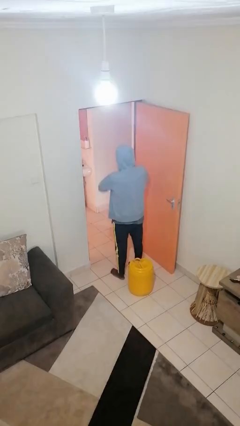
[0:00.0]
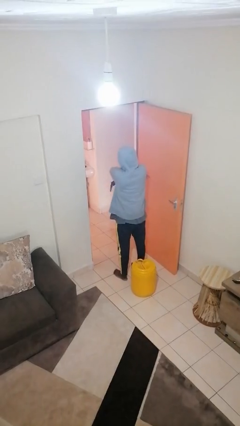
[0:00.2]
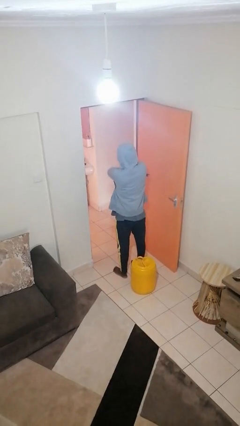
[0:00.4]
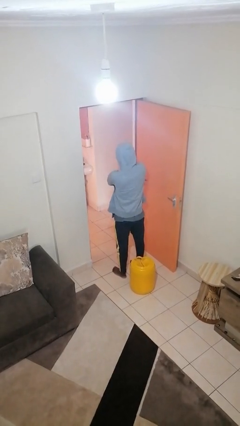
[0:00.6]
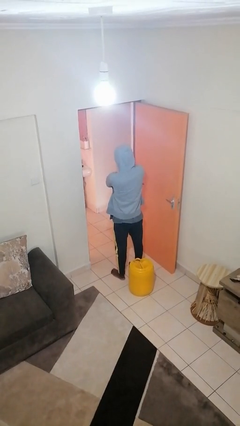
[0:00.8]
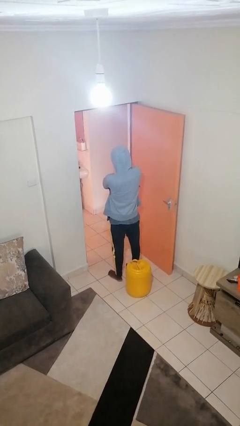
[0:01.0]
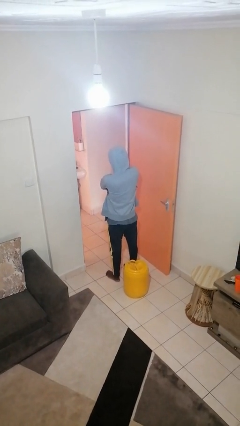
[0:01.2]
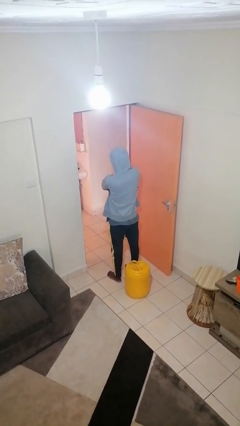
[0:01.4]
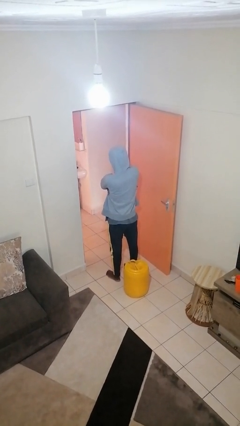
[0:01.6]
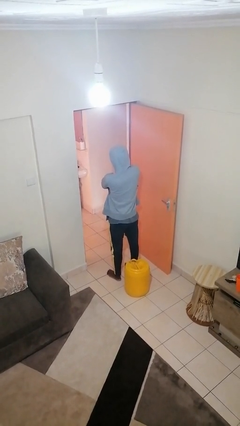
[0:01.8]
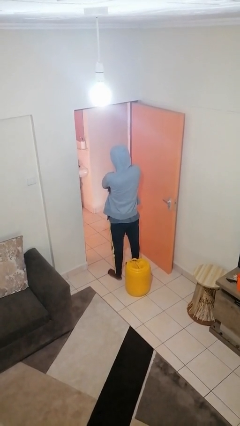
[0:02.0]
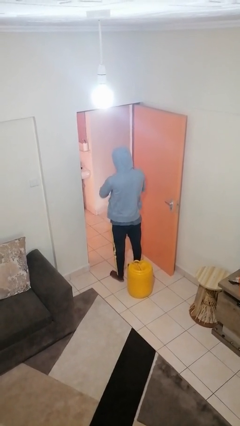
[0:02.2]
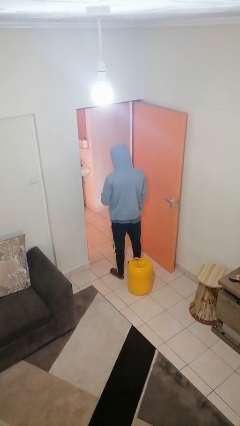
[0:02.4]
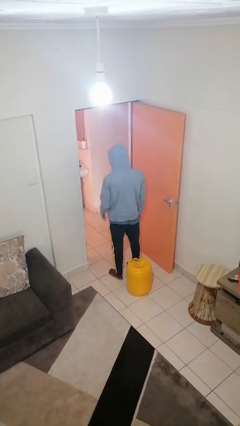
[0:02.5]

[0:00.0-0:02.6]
person crosses arms

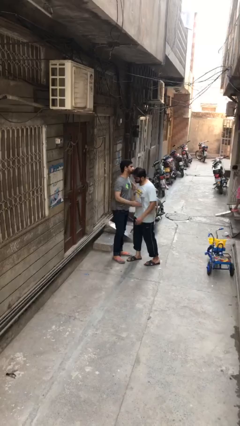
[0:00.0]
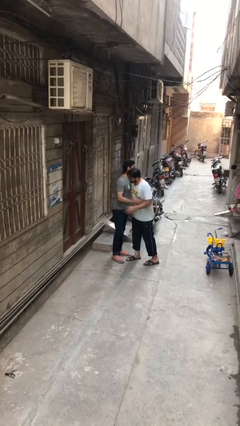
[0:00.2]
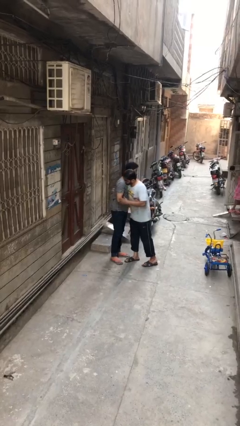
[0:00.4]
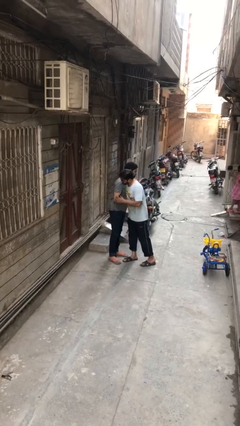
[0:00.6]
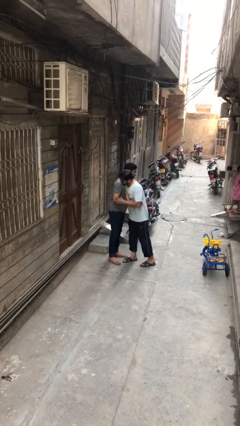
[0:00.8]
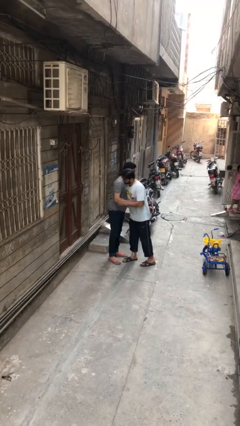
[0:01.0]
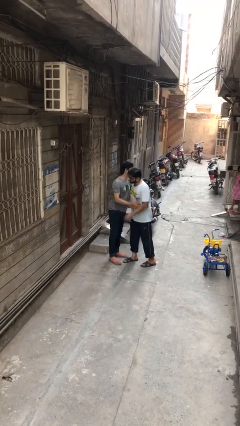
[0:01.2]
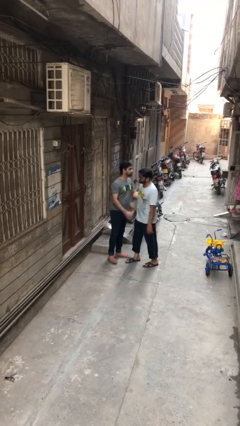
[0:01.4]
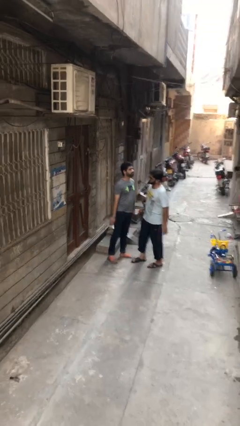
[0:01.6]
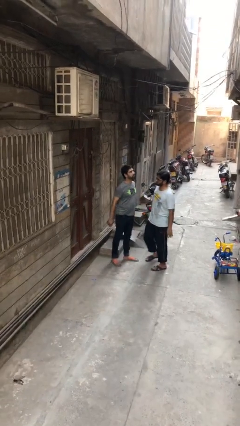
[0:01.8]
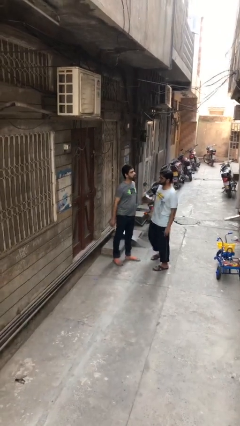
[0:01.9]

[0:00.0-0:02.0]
person embraces person

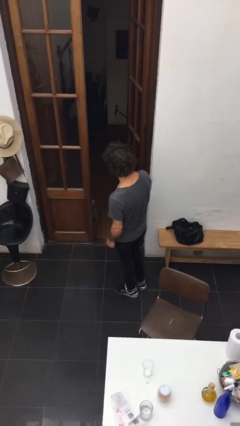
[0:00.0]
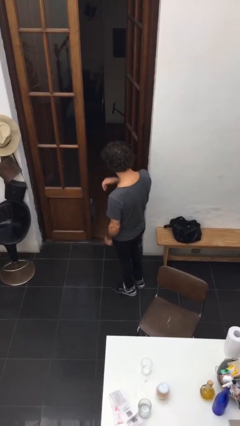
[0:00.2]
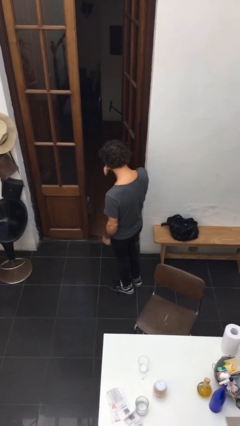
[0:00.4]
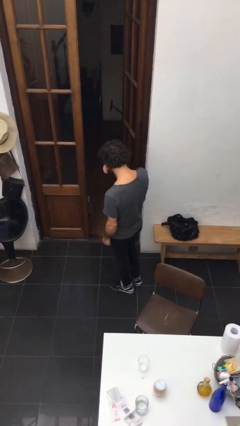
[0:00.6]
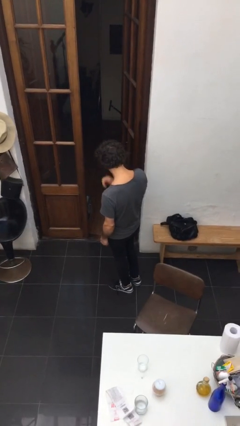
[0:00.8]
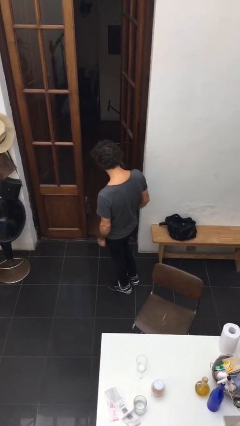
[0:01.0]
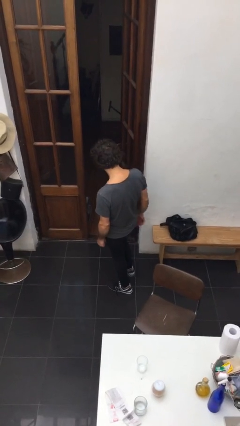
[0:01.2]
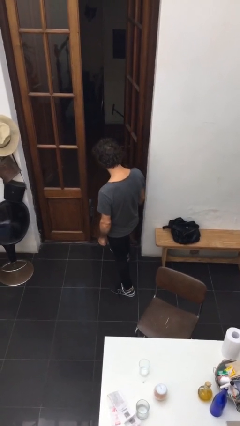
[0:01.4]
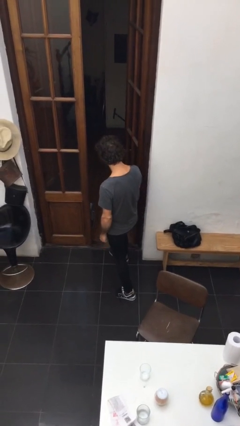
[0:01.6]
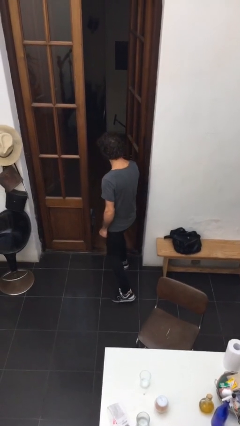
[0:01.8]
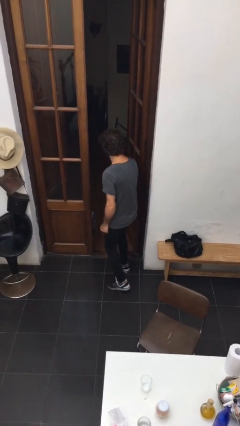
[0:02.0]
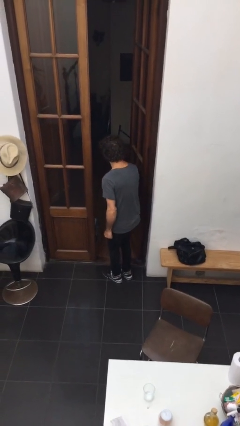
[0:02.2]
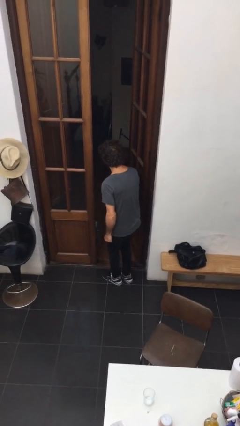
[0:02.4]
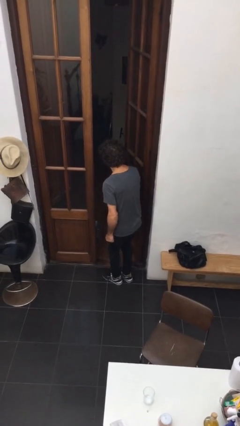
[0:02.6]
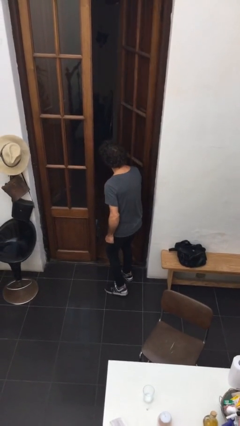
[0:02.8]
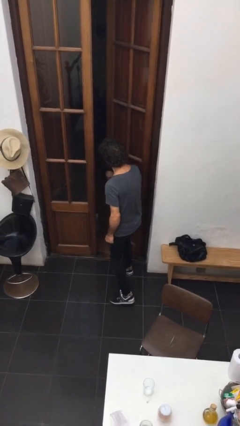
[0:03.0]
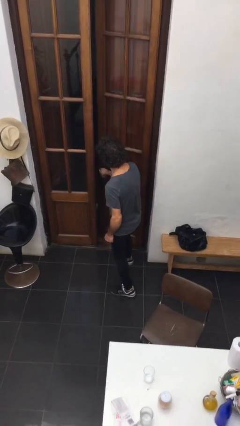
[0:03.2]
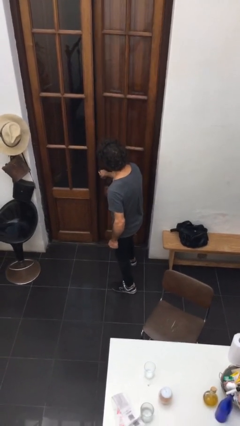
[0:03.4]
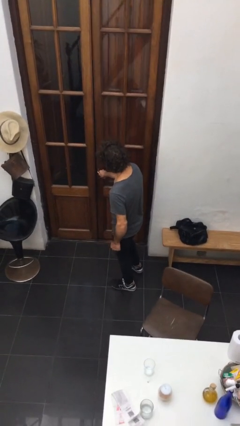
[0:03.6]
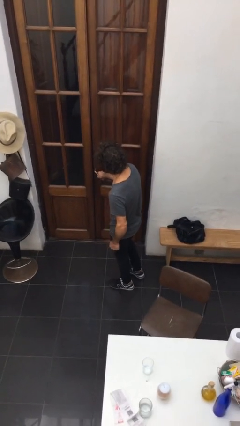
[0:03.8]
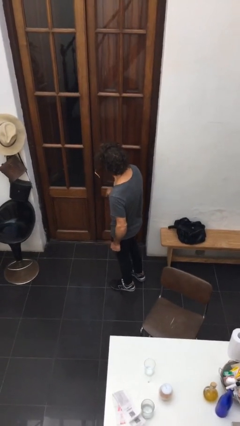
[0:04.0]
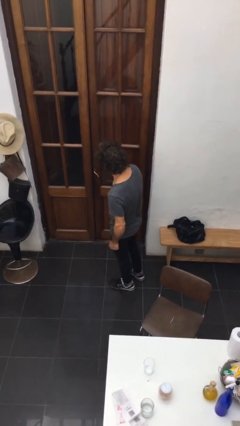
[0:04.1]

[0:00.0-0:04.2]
person closes facility door

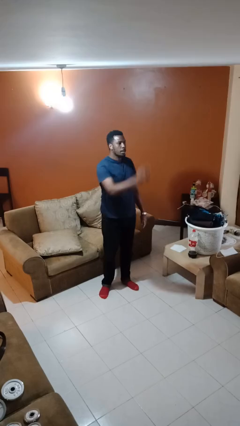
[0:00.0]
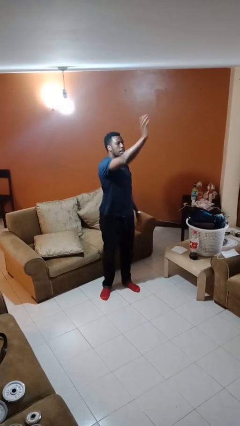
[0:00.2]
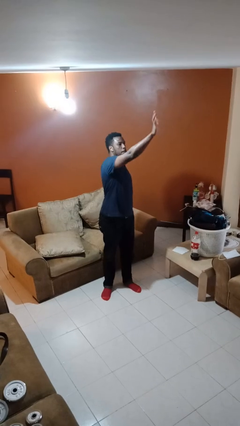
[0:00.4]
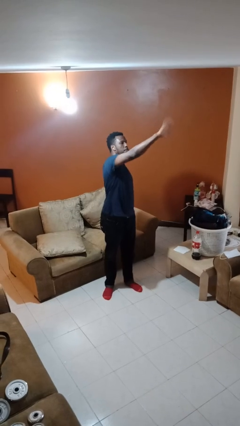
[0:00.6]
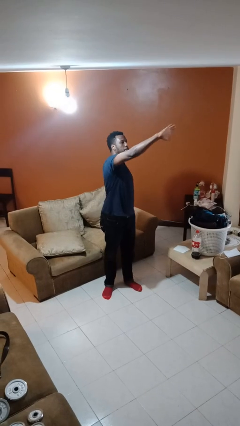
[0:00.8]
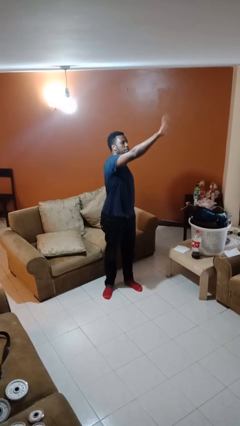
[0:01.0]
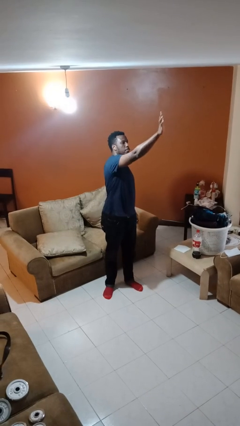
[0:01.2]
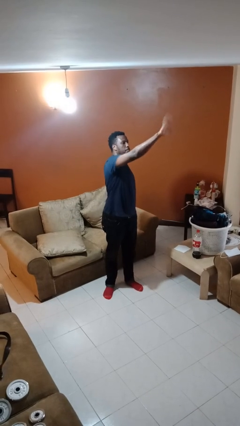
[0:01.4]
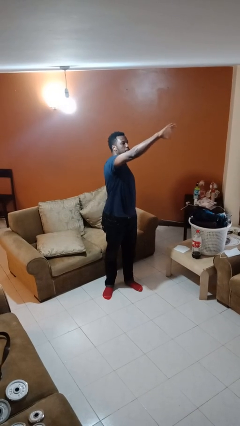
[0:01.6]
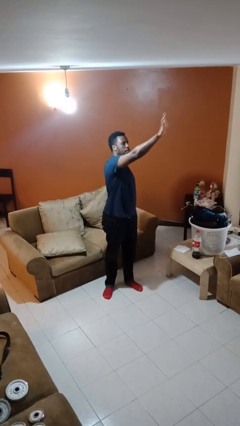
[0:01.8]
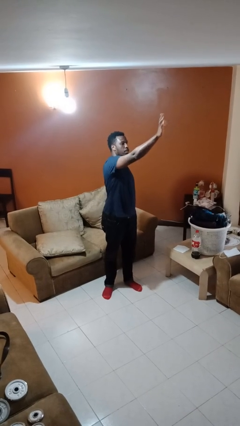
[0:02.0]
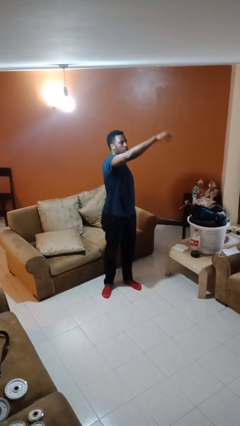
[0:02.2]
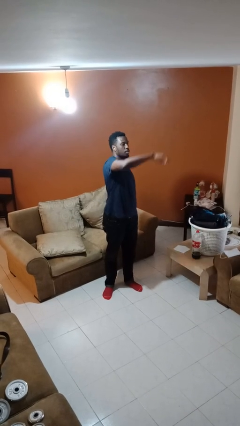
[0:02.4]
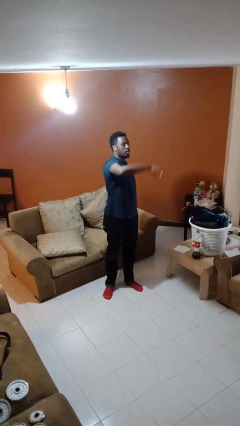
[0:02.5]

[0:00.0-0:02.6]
person waves at person

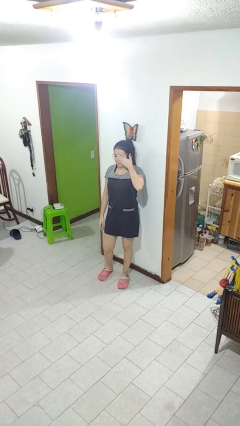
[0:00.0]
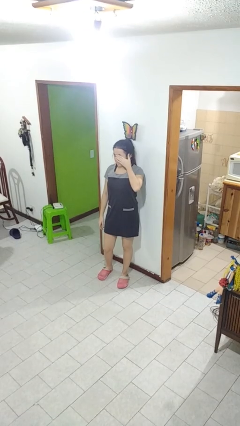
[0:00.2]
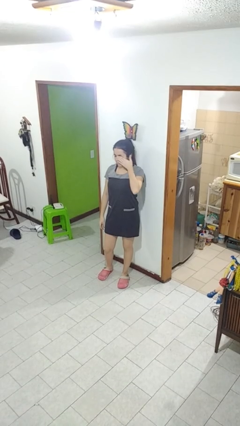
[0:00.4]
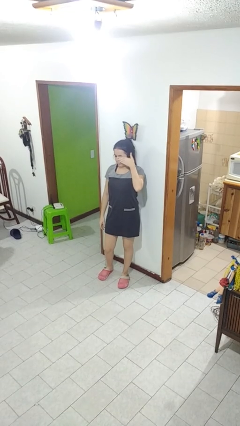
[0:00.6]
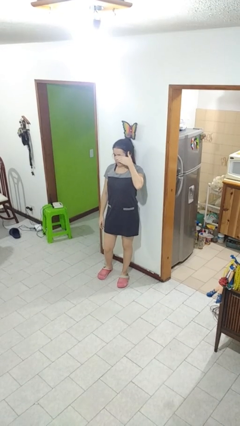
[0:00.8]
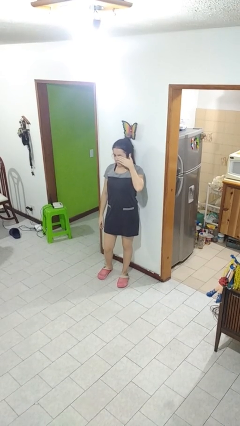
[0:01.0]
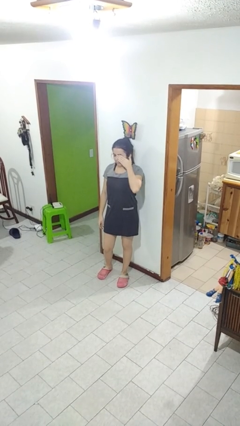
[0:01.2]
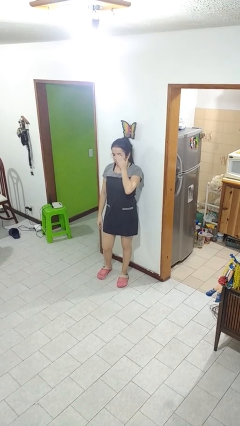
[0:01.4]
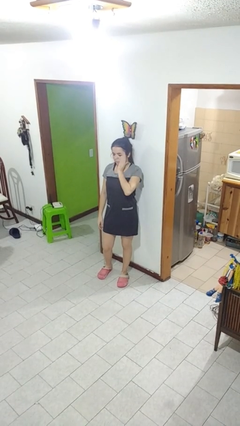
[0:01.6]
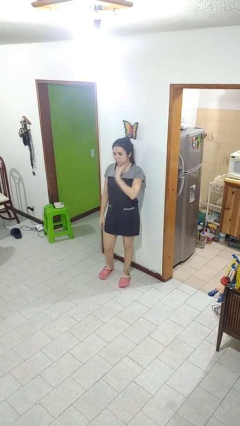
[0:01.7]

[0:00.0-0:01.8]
person rubs eyes

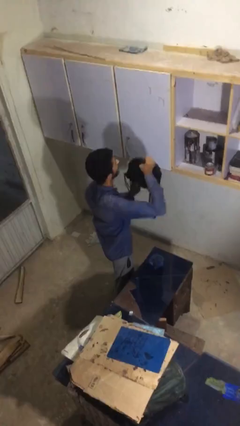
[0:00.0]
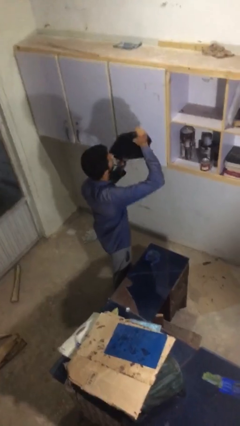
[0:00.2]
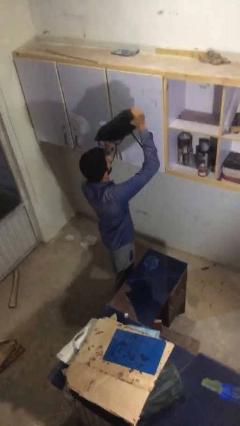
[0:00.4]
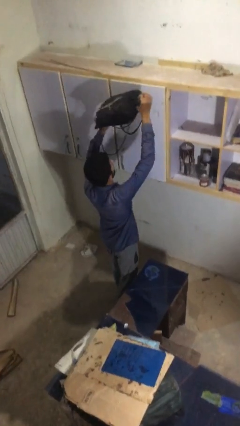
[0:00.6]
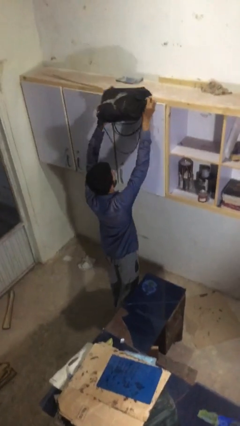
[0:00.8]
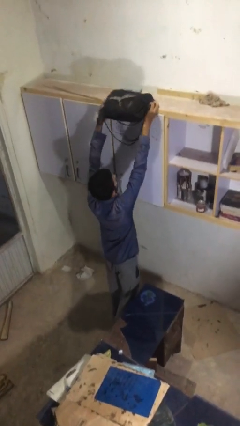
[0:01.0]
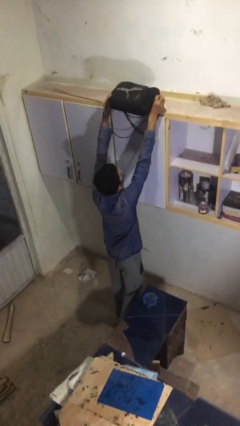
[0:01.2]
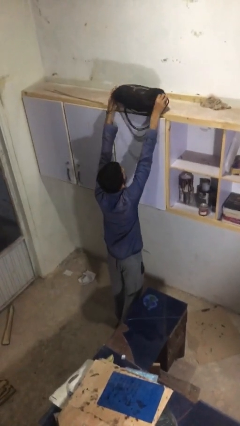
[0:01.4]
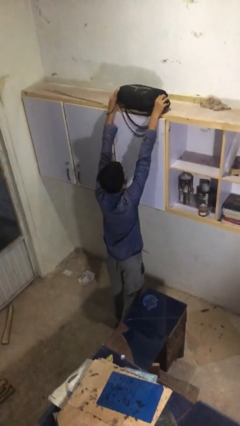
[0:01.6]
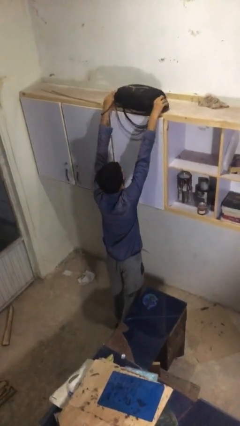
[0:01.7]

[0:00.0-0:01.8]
person puts down object on shelf

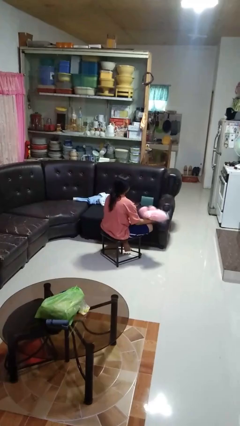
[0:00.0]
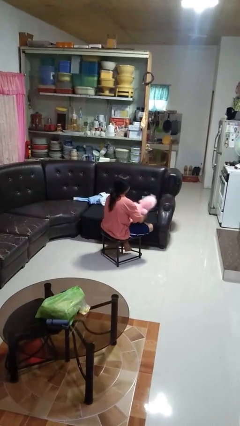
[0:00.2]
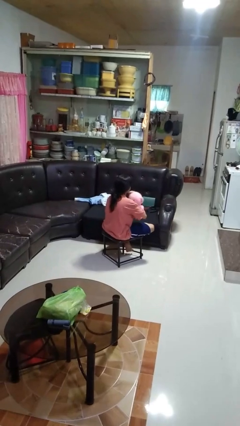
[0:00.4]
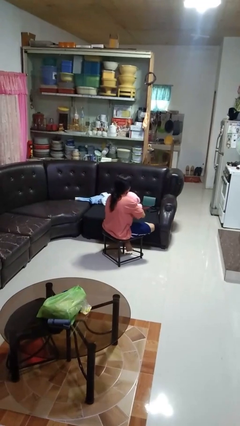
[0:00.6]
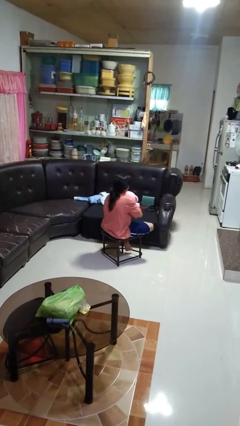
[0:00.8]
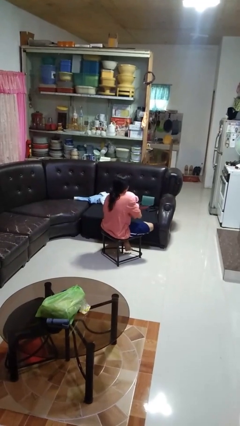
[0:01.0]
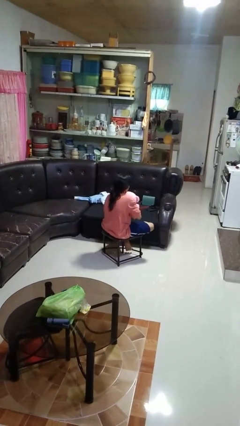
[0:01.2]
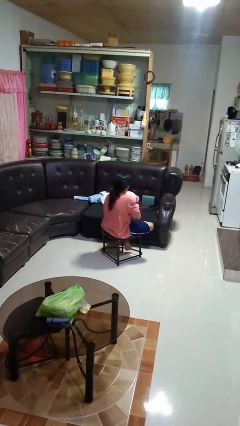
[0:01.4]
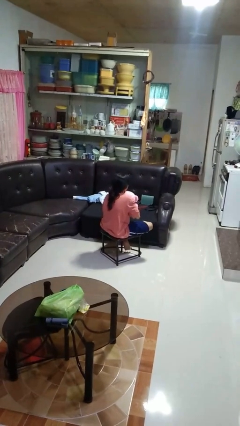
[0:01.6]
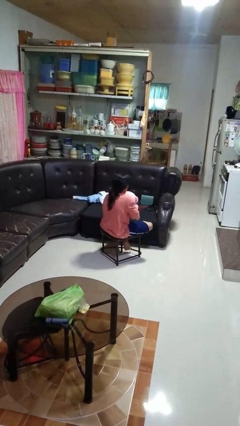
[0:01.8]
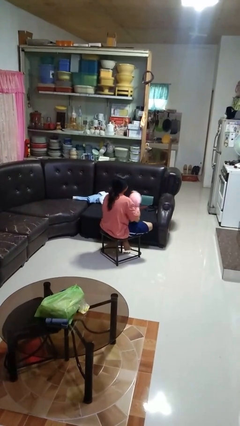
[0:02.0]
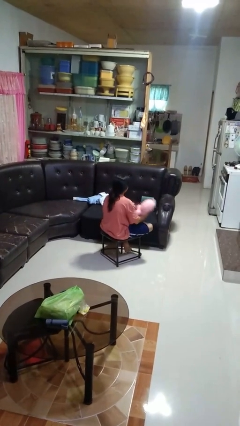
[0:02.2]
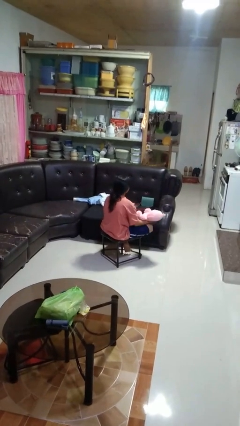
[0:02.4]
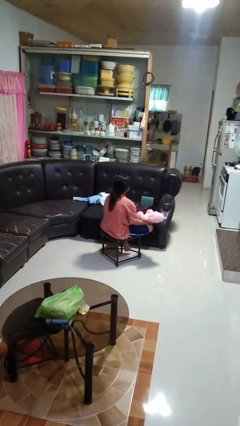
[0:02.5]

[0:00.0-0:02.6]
person hugs stuffed animal
